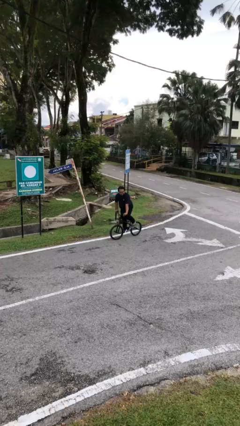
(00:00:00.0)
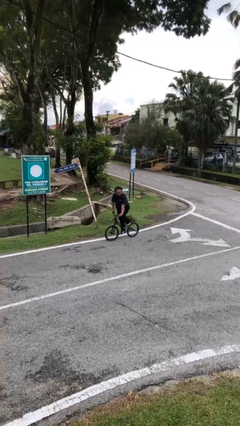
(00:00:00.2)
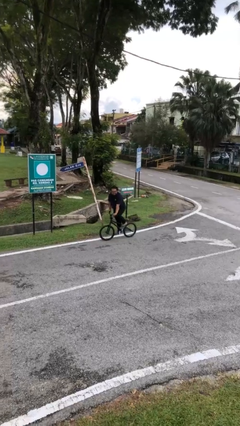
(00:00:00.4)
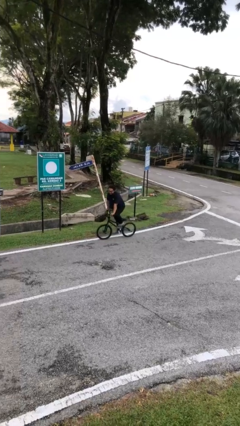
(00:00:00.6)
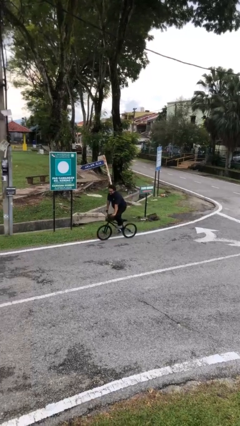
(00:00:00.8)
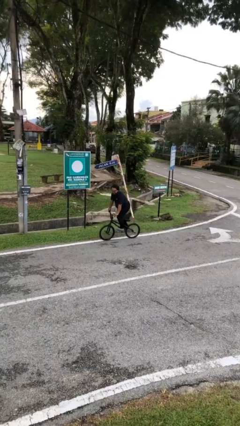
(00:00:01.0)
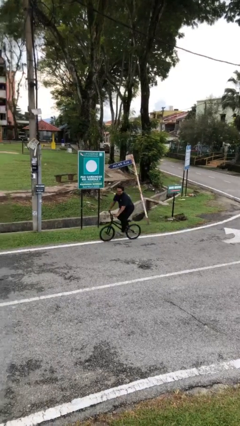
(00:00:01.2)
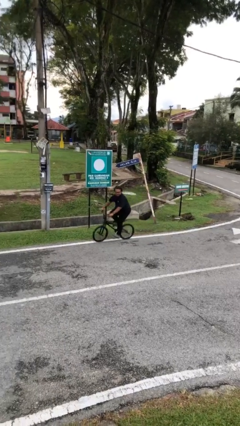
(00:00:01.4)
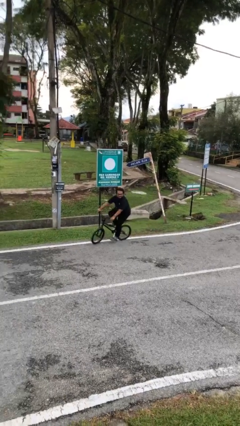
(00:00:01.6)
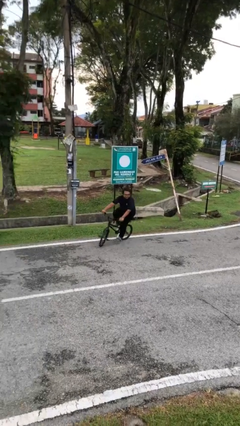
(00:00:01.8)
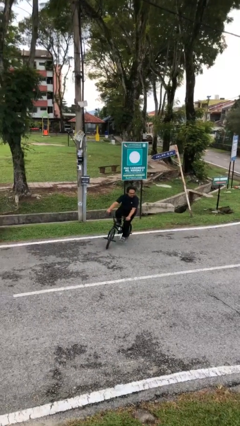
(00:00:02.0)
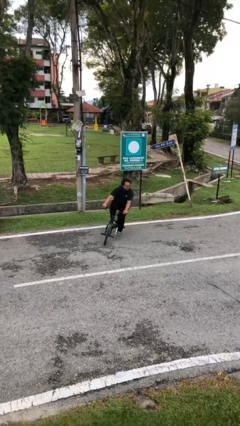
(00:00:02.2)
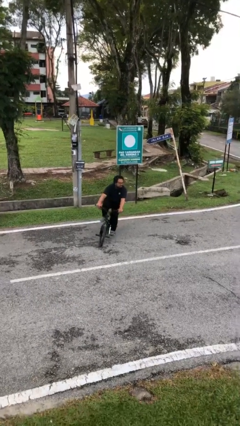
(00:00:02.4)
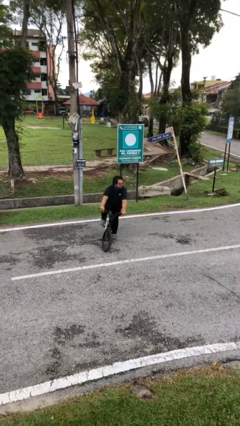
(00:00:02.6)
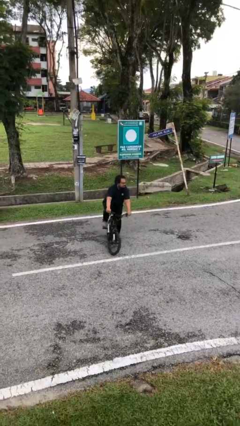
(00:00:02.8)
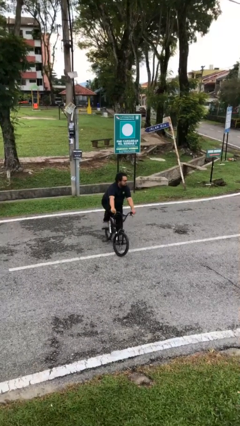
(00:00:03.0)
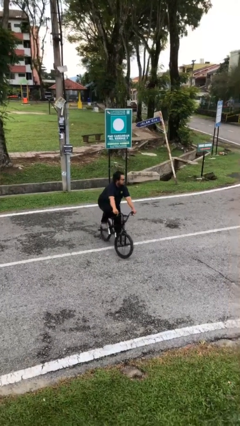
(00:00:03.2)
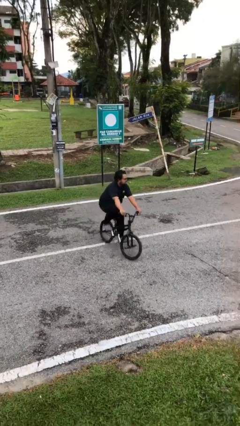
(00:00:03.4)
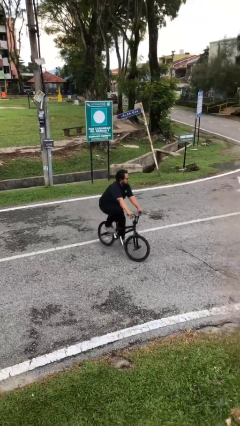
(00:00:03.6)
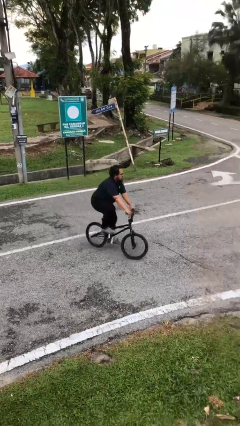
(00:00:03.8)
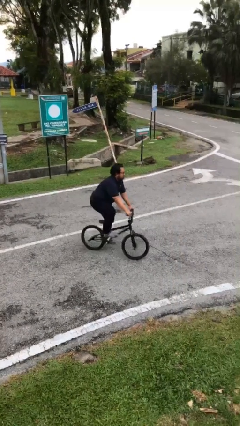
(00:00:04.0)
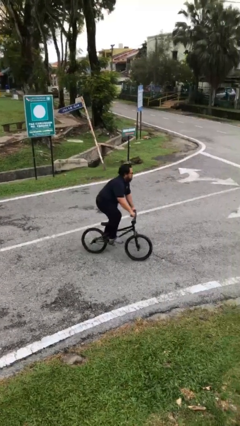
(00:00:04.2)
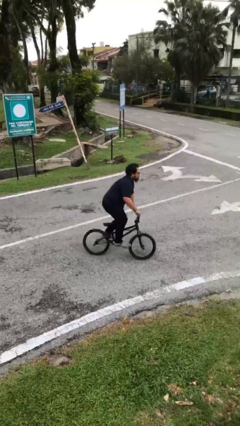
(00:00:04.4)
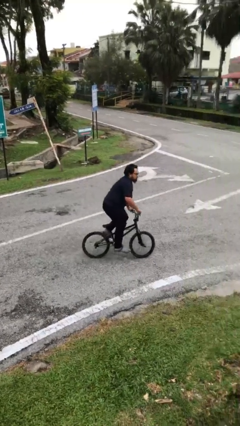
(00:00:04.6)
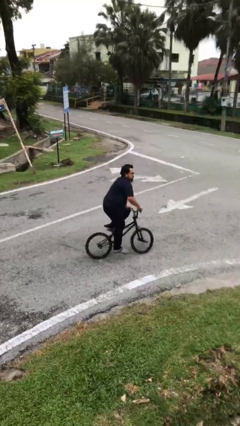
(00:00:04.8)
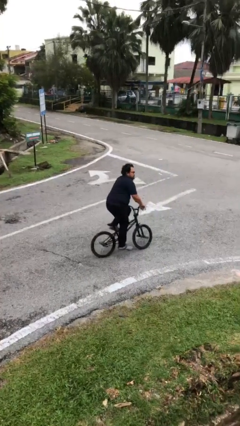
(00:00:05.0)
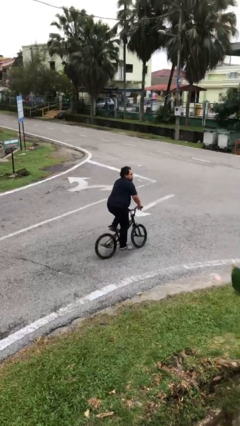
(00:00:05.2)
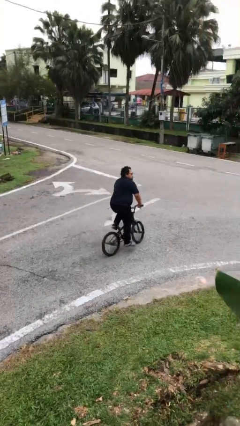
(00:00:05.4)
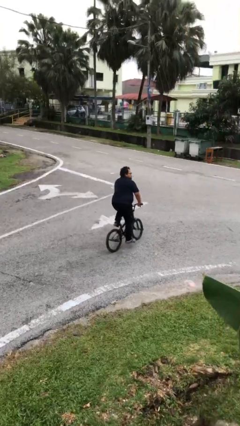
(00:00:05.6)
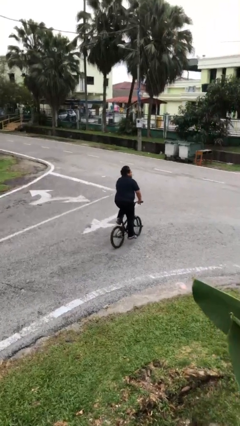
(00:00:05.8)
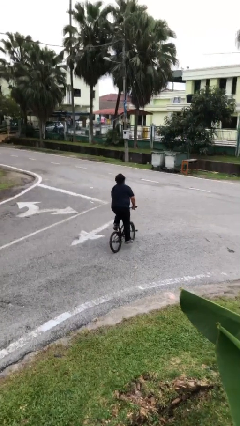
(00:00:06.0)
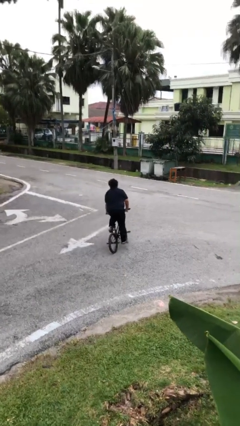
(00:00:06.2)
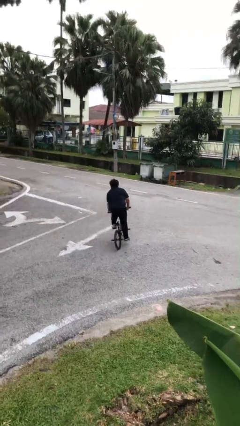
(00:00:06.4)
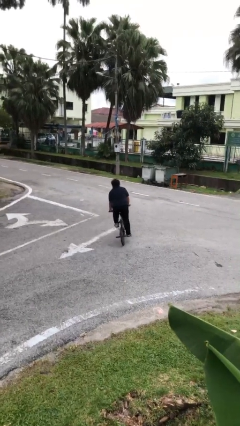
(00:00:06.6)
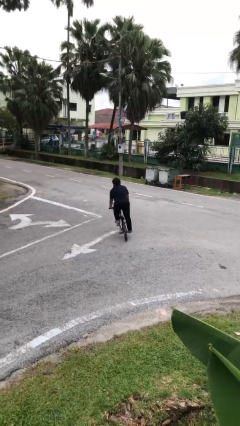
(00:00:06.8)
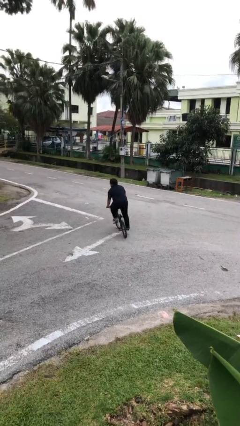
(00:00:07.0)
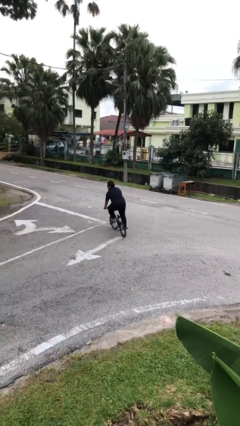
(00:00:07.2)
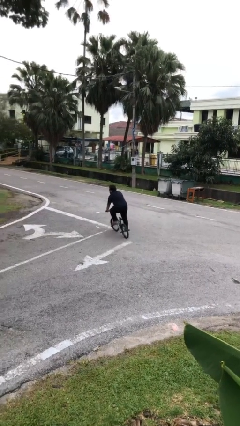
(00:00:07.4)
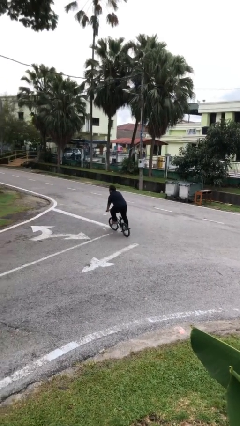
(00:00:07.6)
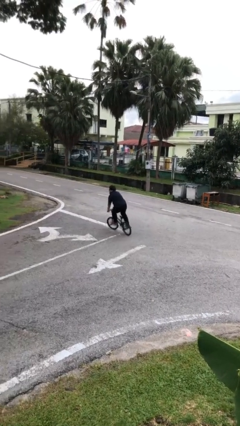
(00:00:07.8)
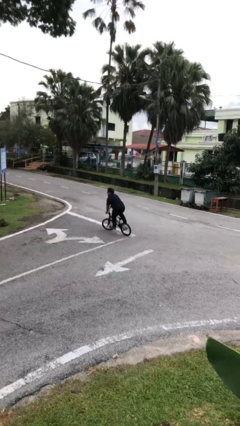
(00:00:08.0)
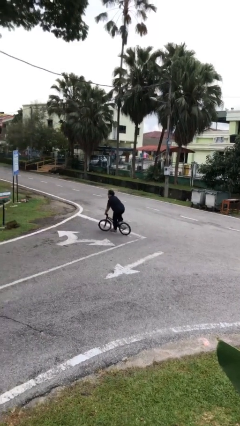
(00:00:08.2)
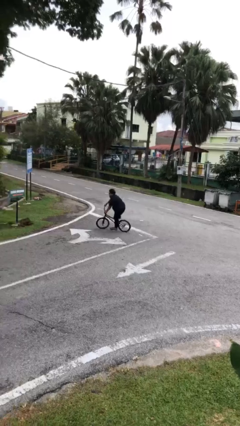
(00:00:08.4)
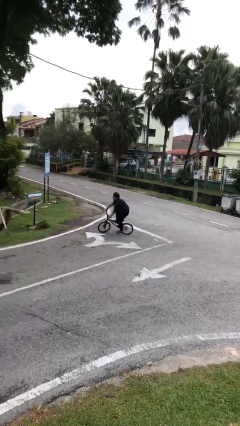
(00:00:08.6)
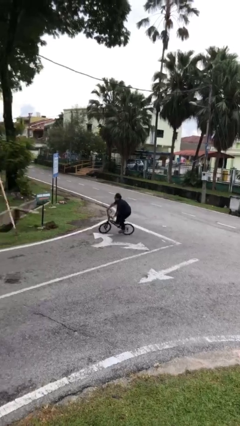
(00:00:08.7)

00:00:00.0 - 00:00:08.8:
person rides bicycle

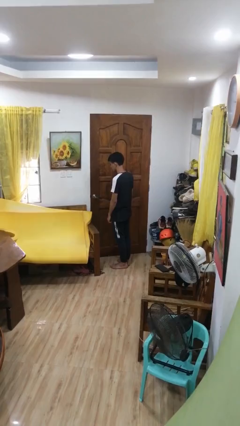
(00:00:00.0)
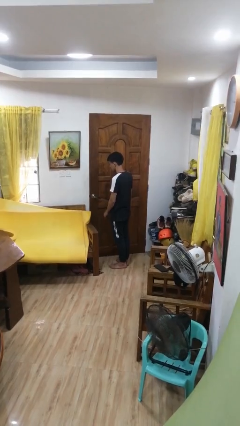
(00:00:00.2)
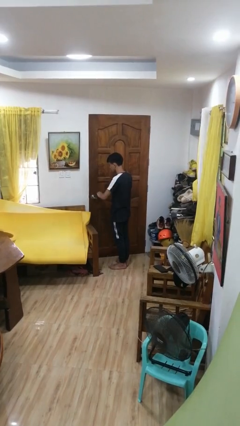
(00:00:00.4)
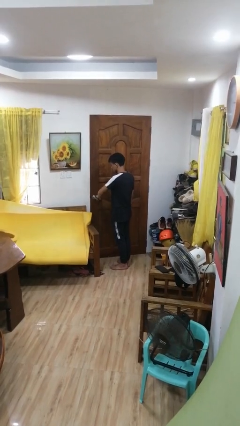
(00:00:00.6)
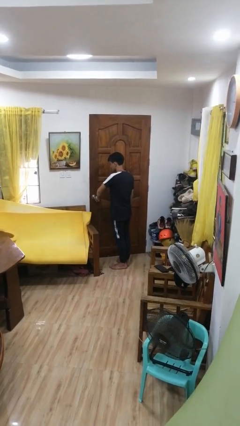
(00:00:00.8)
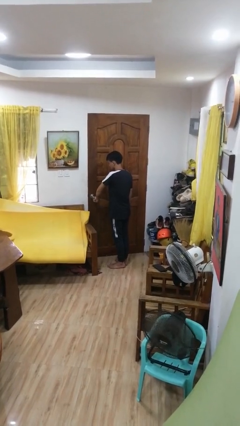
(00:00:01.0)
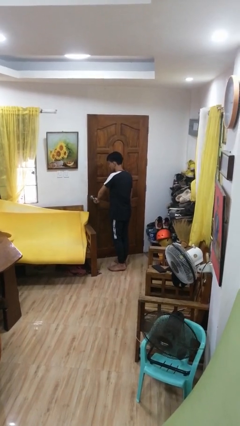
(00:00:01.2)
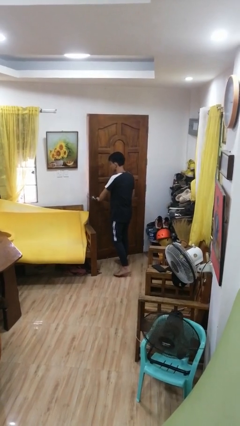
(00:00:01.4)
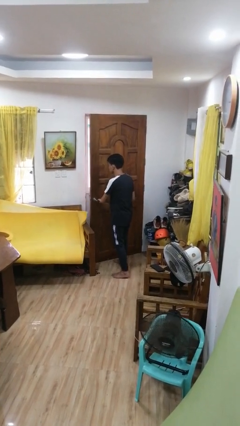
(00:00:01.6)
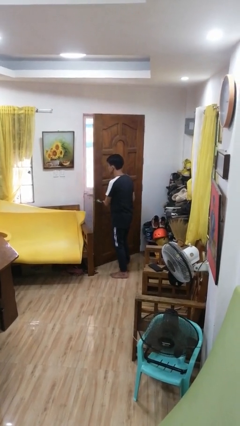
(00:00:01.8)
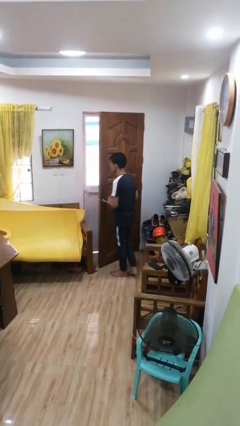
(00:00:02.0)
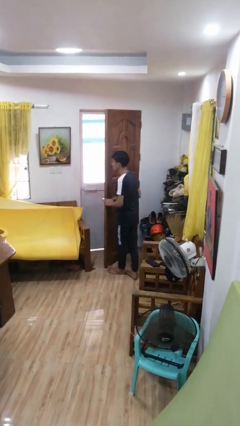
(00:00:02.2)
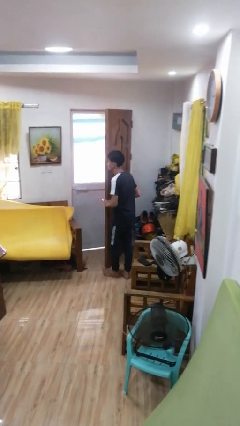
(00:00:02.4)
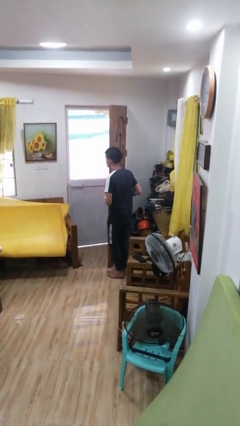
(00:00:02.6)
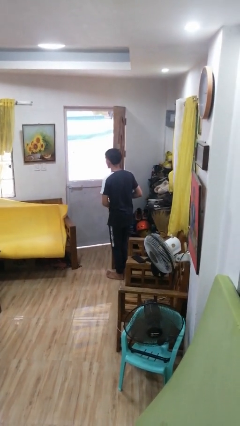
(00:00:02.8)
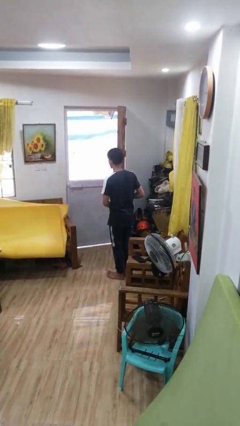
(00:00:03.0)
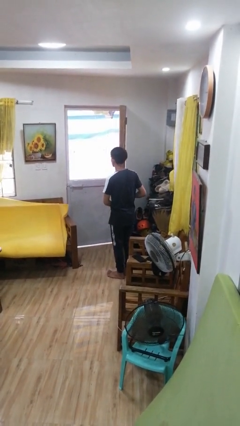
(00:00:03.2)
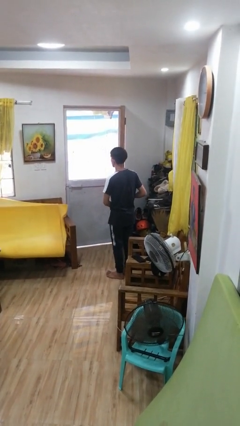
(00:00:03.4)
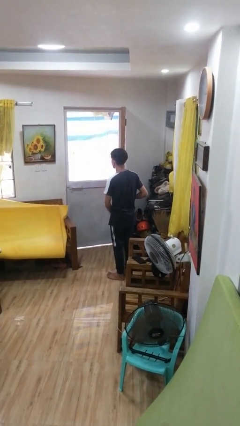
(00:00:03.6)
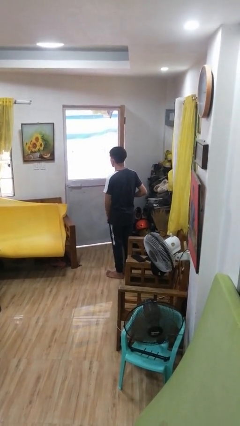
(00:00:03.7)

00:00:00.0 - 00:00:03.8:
person opens facility door

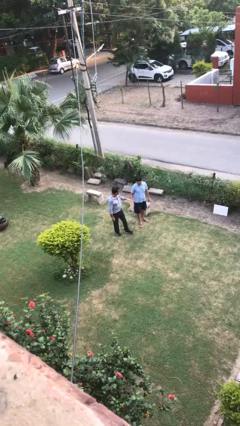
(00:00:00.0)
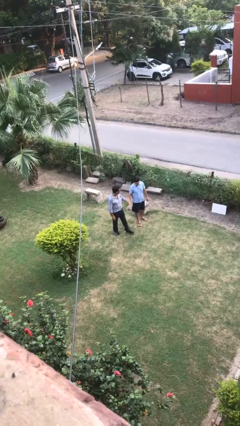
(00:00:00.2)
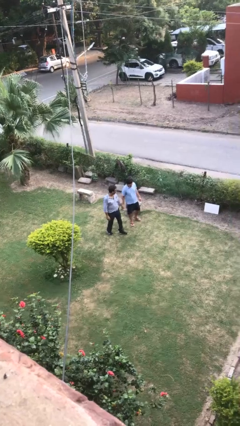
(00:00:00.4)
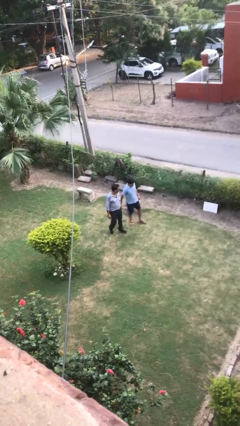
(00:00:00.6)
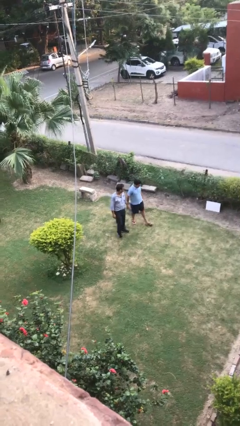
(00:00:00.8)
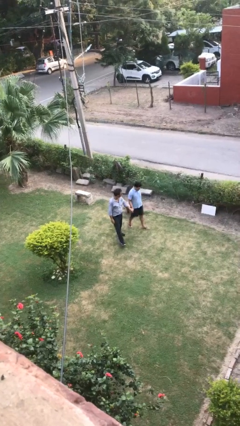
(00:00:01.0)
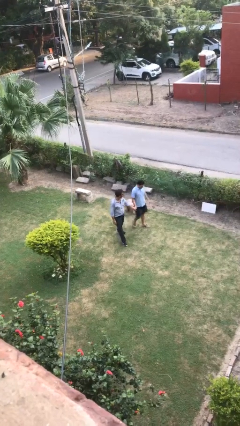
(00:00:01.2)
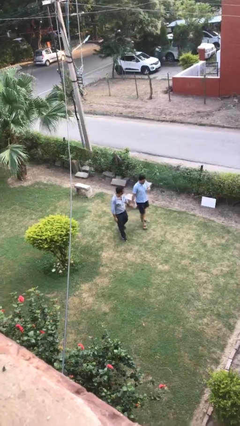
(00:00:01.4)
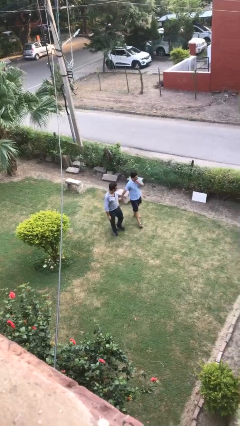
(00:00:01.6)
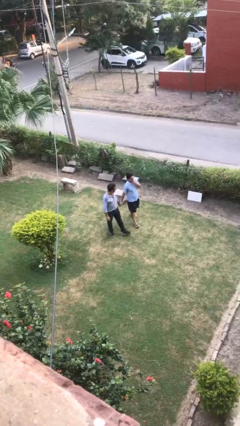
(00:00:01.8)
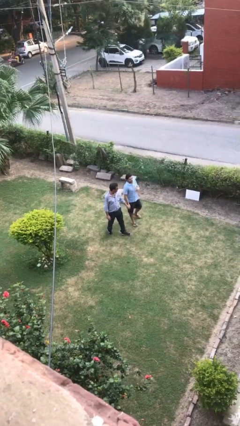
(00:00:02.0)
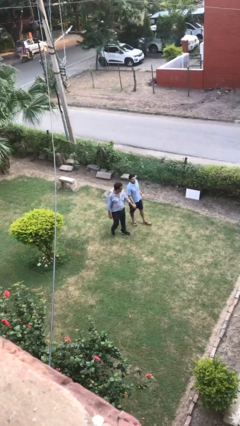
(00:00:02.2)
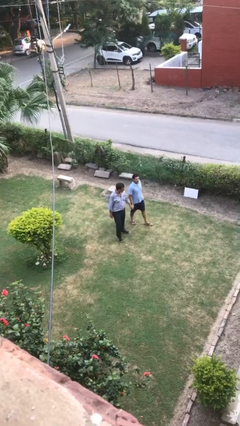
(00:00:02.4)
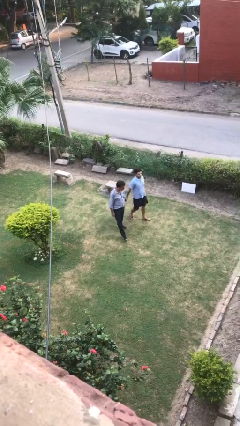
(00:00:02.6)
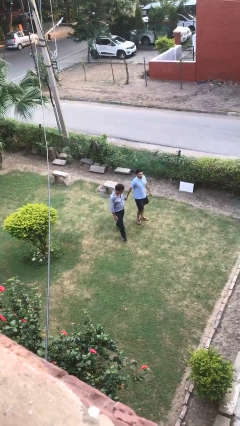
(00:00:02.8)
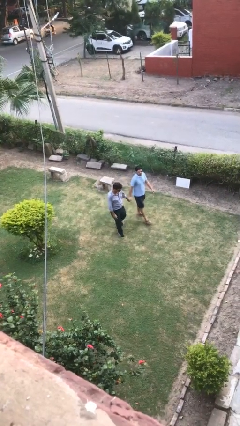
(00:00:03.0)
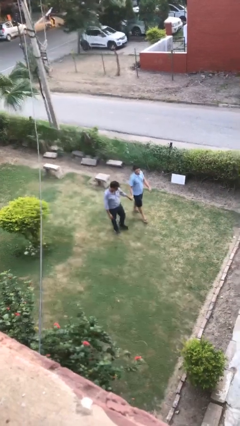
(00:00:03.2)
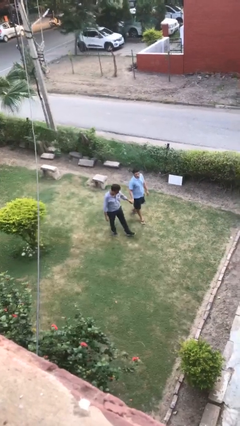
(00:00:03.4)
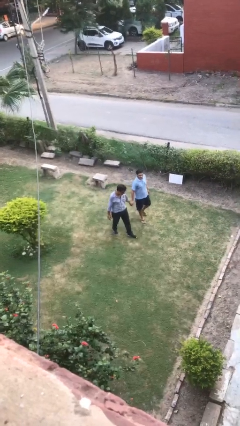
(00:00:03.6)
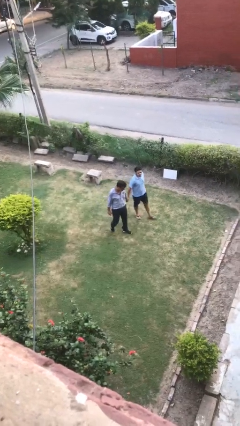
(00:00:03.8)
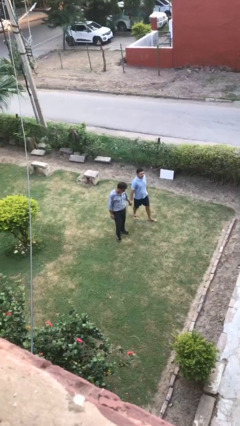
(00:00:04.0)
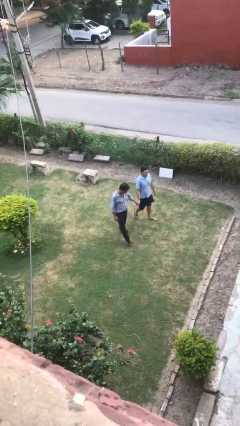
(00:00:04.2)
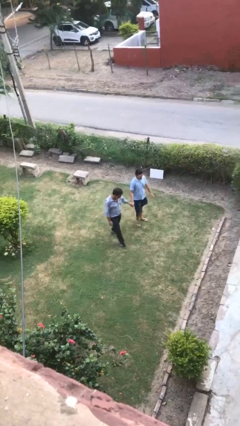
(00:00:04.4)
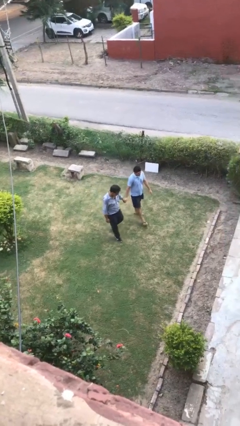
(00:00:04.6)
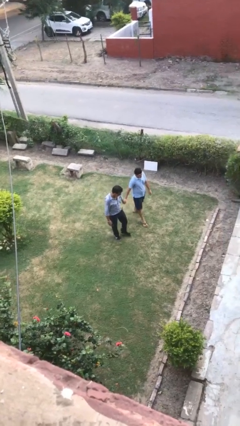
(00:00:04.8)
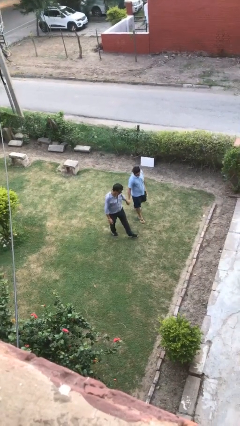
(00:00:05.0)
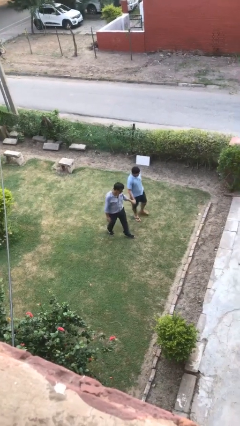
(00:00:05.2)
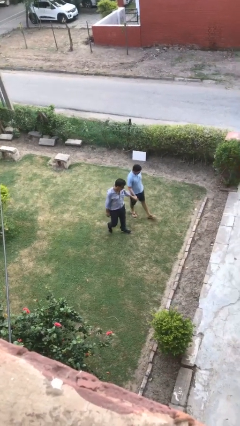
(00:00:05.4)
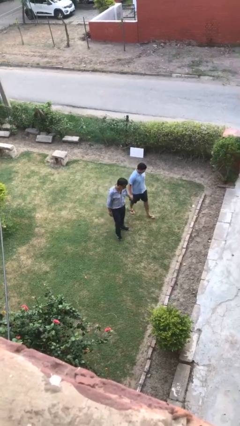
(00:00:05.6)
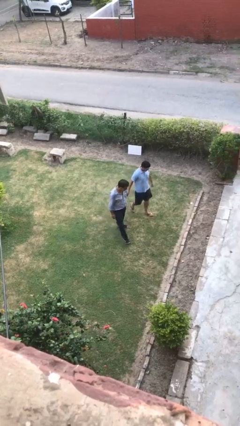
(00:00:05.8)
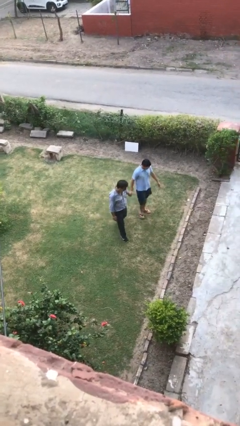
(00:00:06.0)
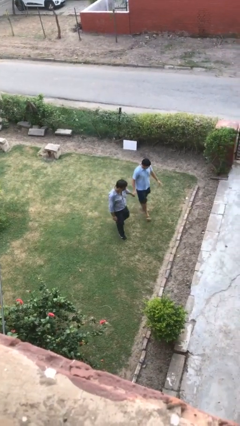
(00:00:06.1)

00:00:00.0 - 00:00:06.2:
person holds hand
